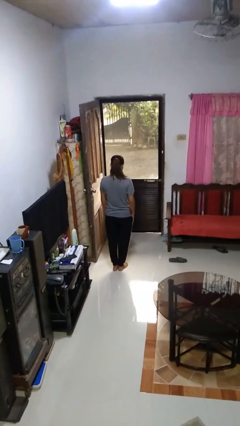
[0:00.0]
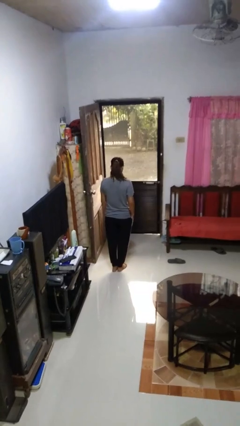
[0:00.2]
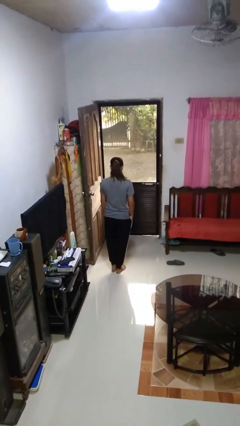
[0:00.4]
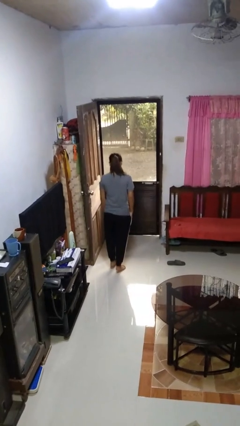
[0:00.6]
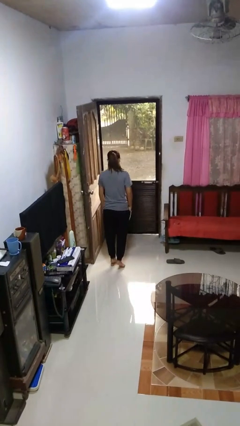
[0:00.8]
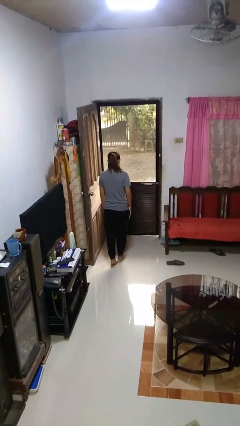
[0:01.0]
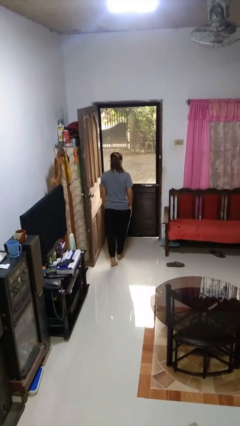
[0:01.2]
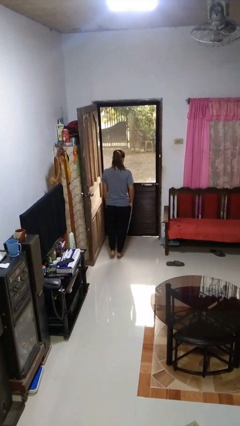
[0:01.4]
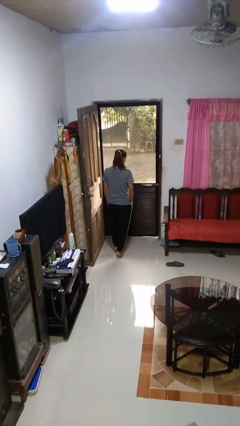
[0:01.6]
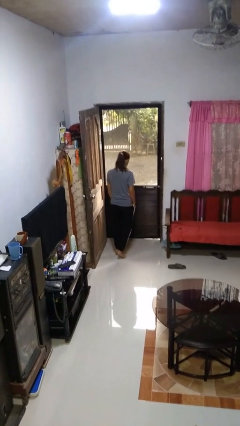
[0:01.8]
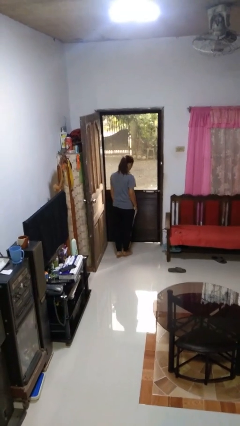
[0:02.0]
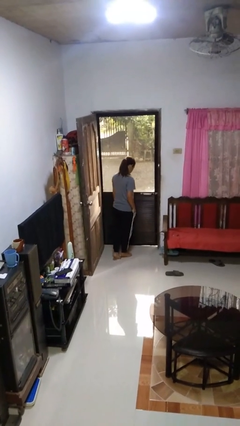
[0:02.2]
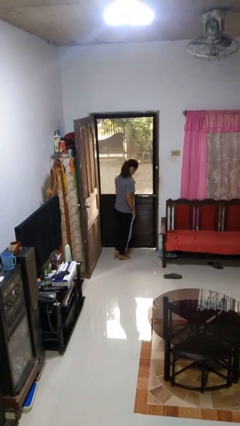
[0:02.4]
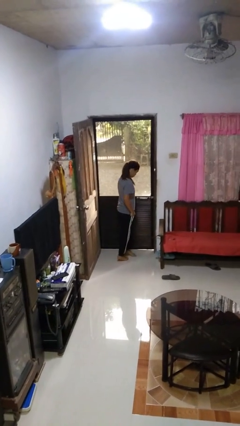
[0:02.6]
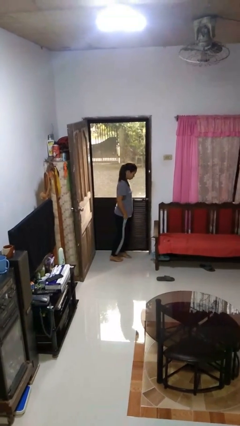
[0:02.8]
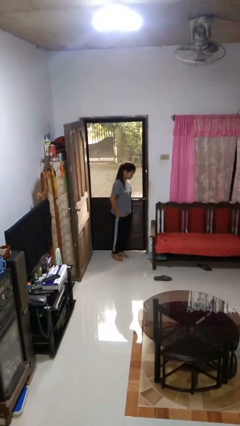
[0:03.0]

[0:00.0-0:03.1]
person walks tiptoe

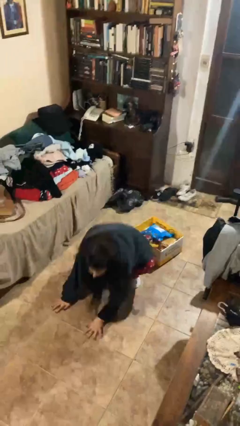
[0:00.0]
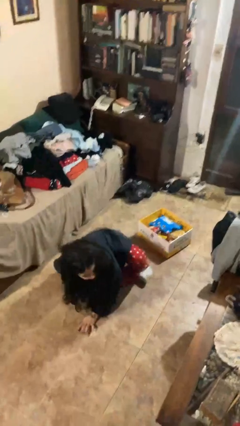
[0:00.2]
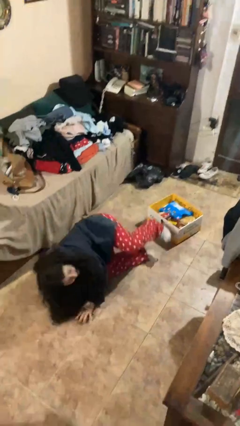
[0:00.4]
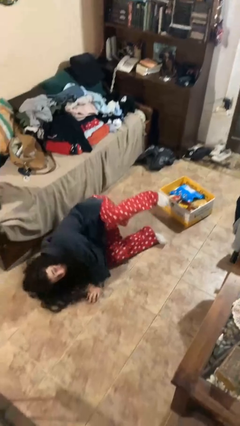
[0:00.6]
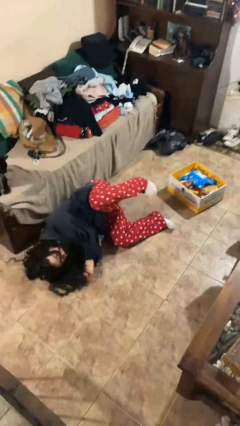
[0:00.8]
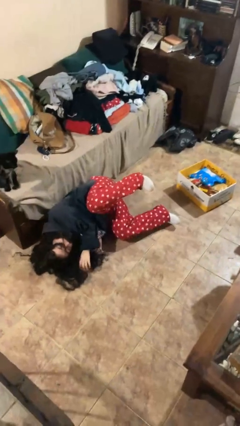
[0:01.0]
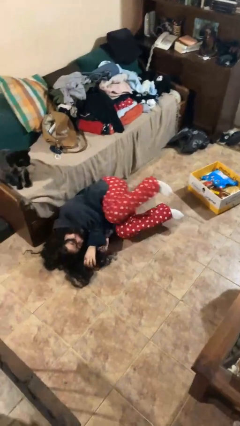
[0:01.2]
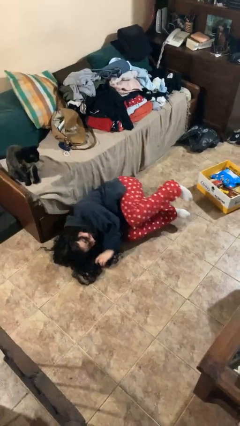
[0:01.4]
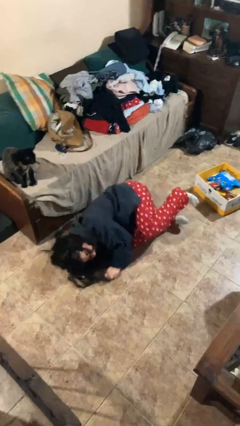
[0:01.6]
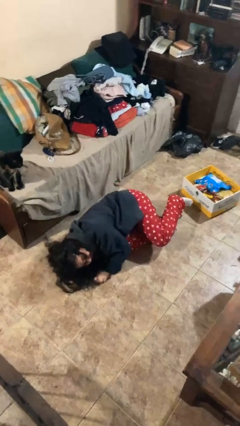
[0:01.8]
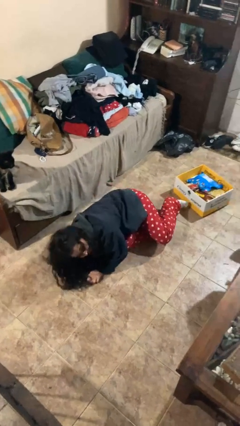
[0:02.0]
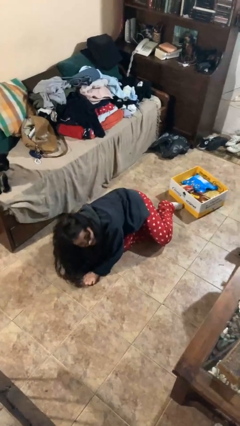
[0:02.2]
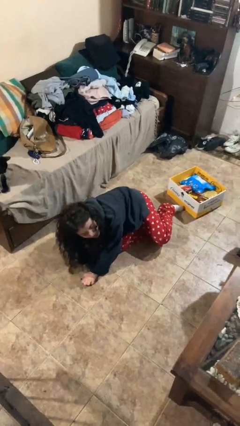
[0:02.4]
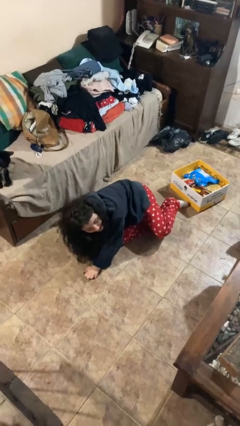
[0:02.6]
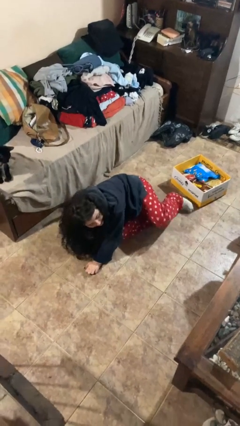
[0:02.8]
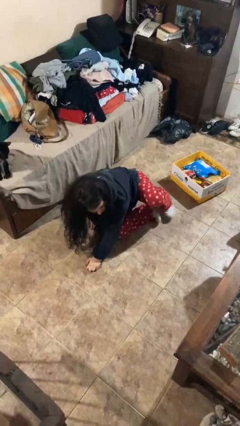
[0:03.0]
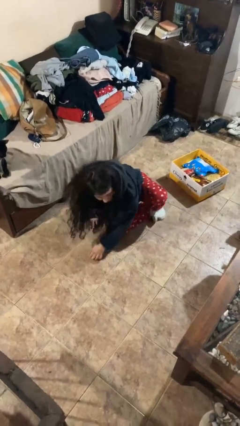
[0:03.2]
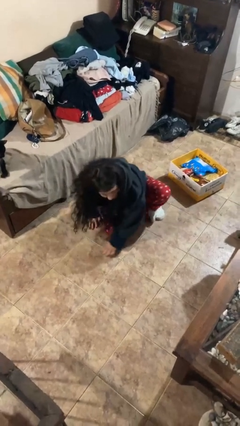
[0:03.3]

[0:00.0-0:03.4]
person lies down on floor

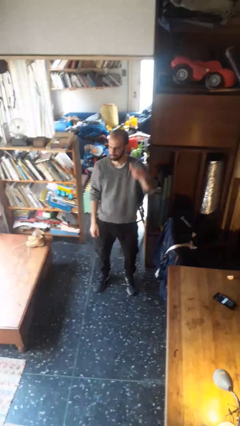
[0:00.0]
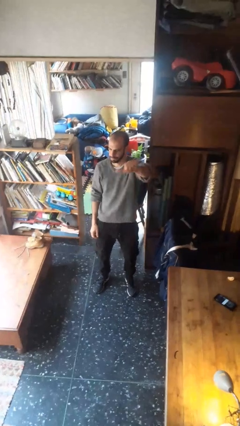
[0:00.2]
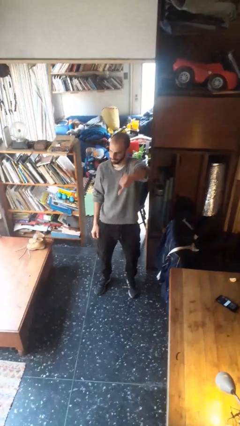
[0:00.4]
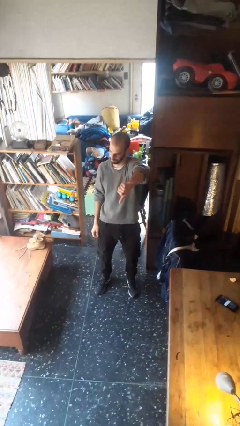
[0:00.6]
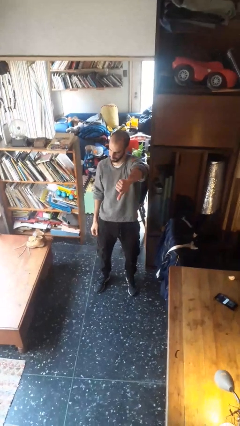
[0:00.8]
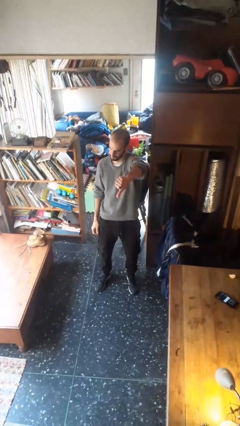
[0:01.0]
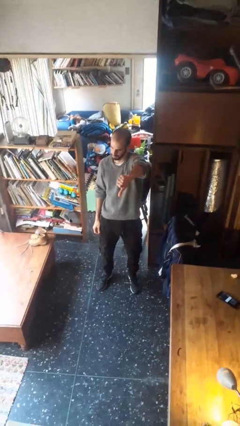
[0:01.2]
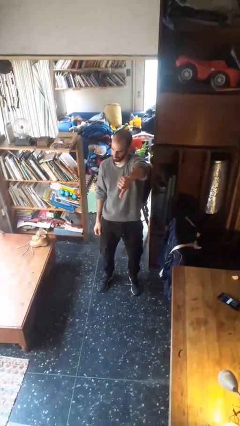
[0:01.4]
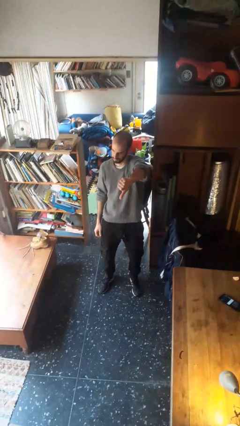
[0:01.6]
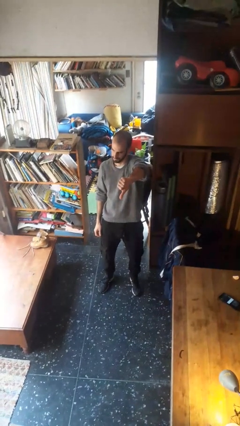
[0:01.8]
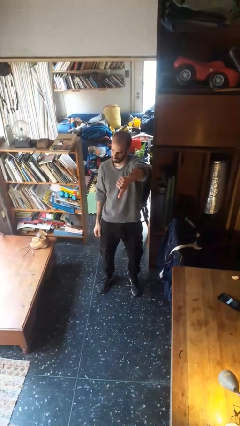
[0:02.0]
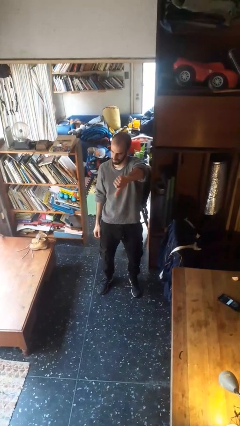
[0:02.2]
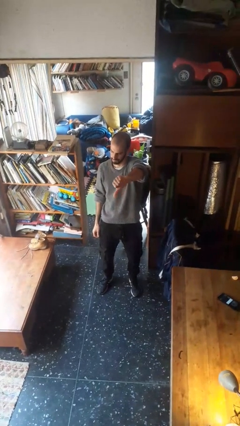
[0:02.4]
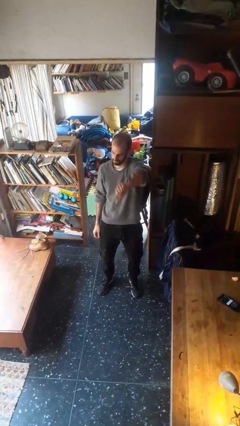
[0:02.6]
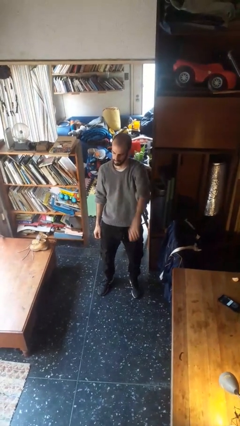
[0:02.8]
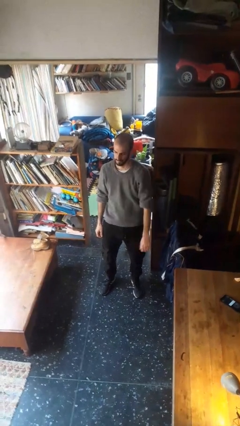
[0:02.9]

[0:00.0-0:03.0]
person gestures thumbs down
